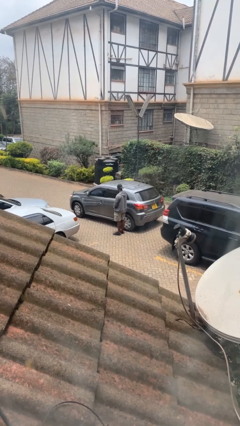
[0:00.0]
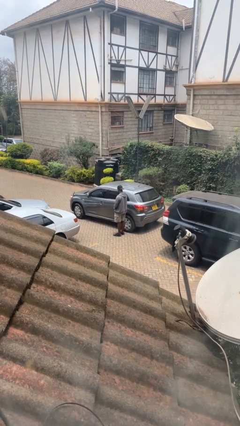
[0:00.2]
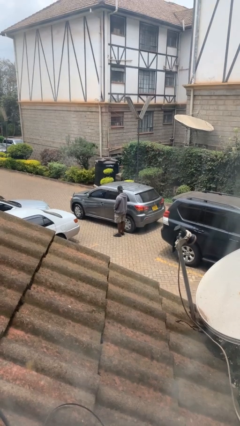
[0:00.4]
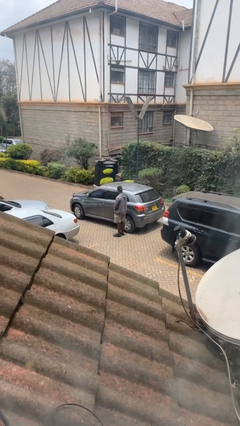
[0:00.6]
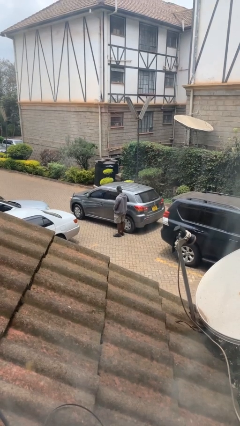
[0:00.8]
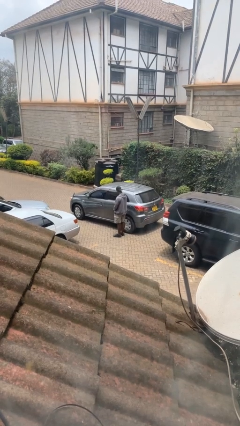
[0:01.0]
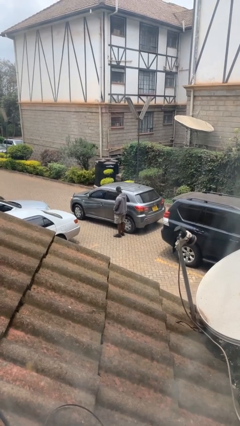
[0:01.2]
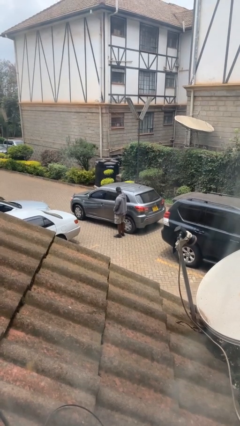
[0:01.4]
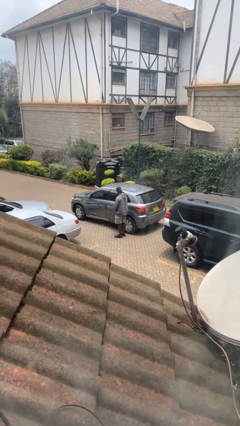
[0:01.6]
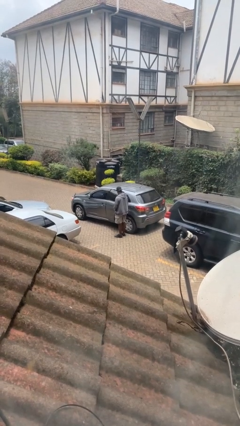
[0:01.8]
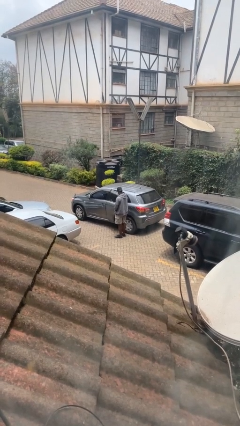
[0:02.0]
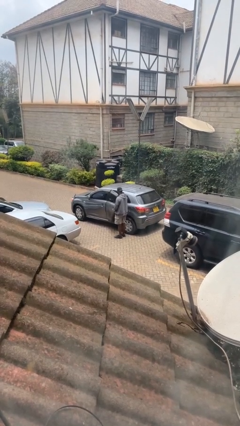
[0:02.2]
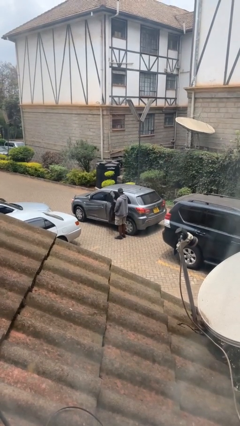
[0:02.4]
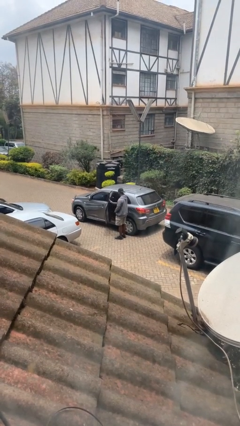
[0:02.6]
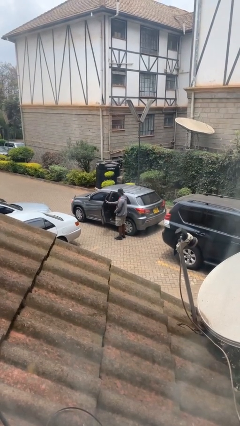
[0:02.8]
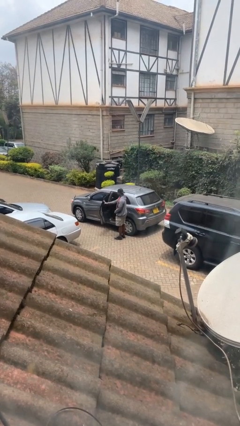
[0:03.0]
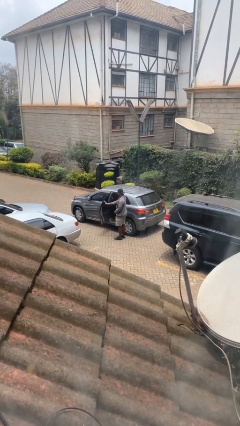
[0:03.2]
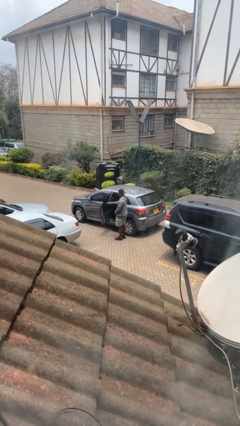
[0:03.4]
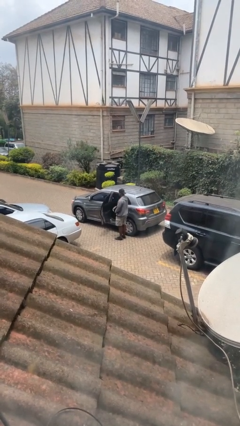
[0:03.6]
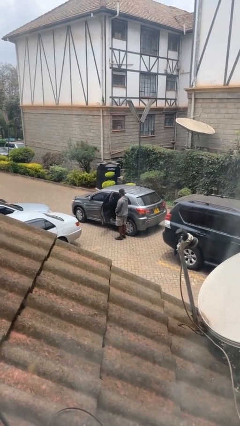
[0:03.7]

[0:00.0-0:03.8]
person opens car door

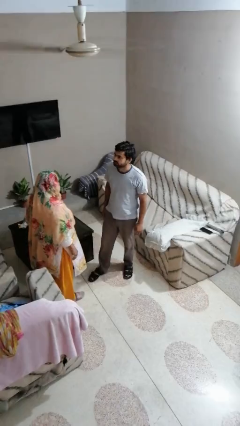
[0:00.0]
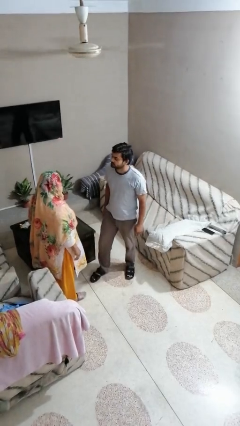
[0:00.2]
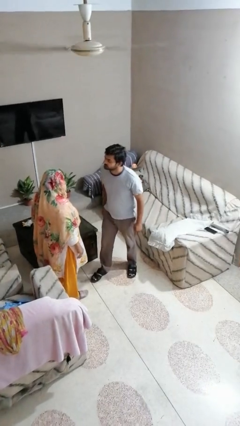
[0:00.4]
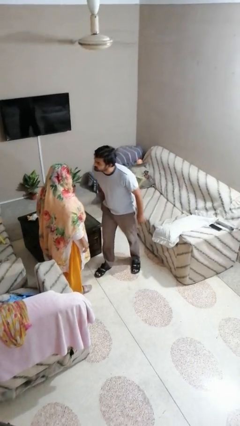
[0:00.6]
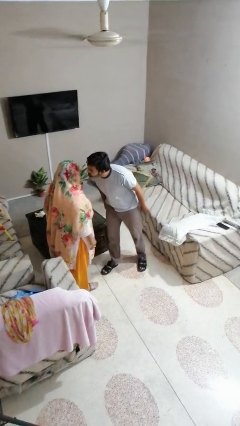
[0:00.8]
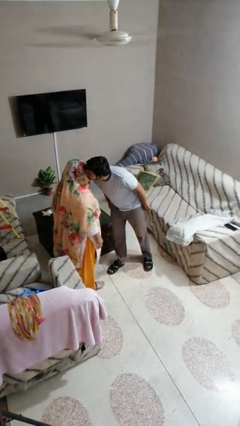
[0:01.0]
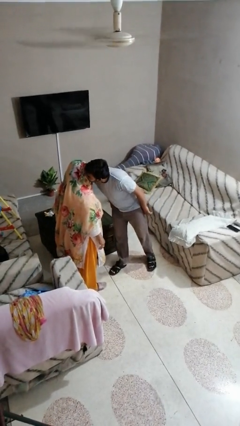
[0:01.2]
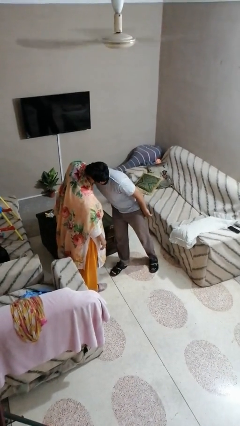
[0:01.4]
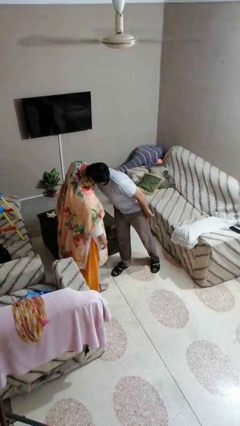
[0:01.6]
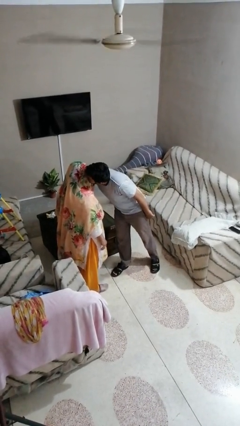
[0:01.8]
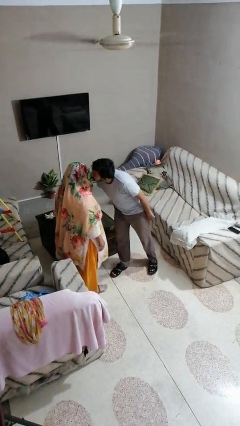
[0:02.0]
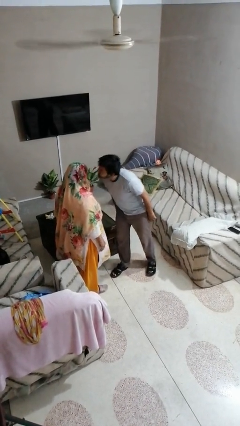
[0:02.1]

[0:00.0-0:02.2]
person kisses cheek of person

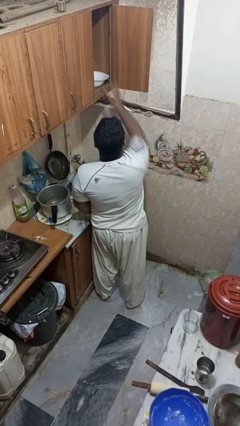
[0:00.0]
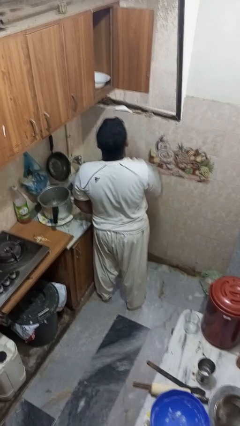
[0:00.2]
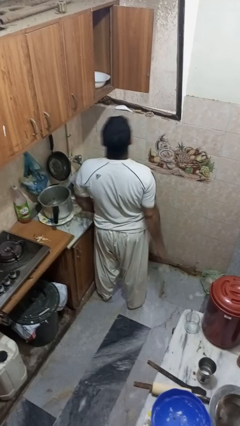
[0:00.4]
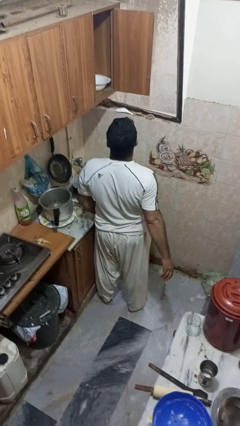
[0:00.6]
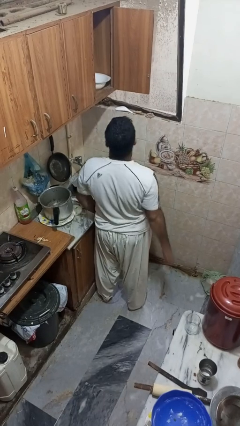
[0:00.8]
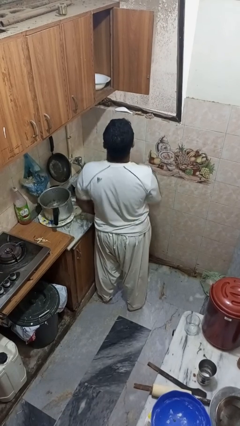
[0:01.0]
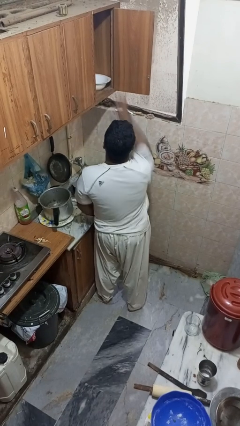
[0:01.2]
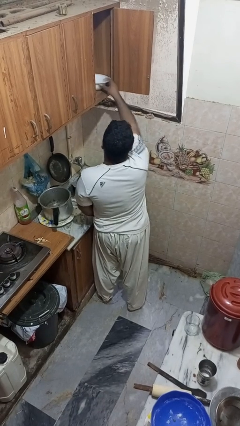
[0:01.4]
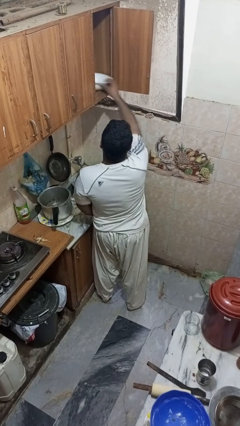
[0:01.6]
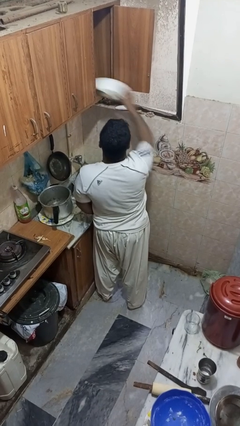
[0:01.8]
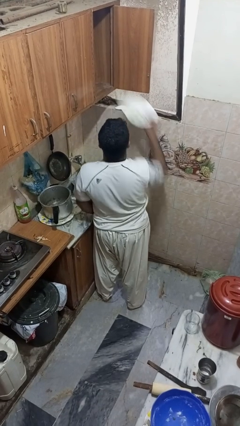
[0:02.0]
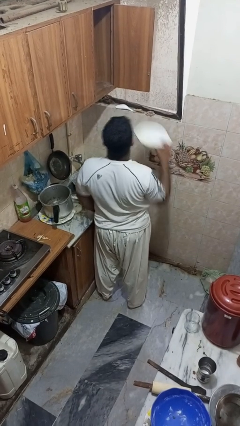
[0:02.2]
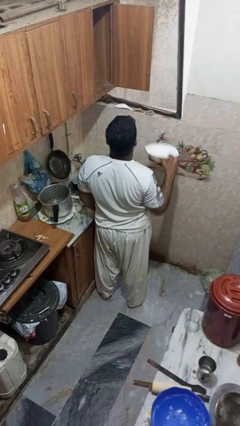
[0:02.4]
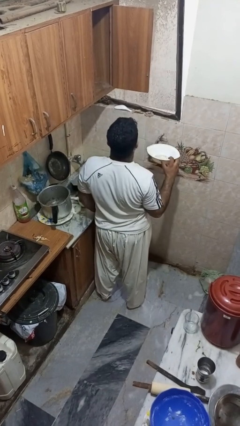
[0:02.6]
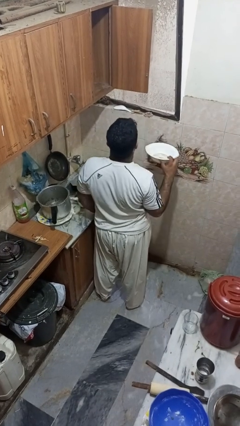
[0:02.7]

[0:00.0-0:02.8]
person takes object from cabinet

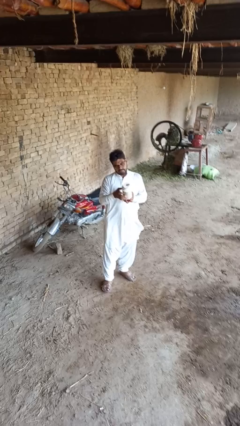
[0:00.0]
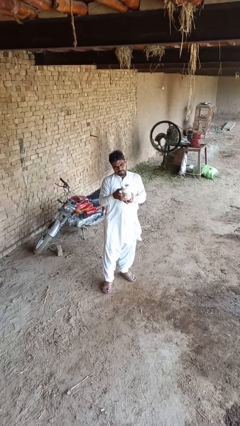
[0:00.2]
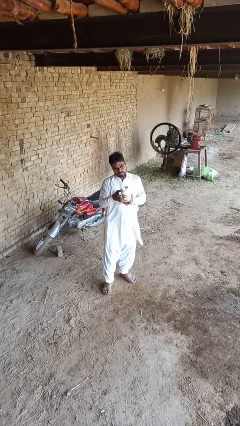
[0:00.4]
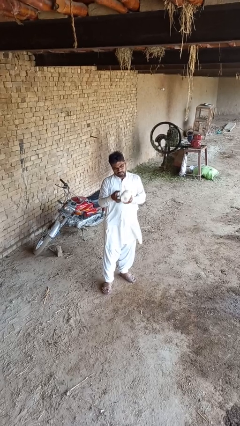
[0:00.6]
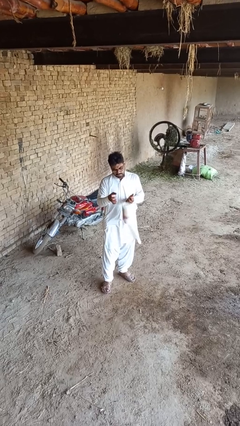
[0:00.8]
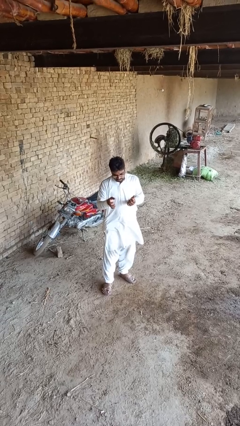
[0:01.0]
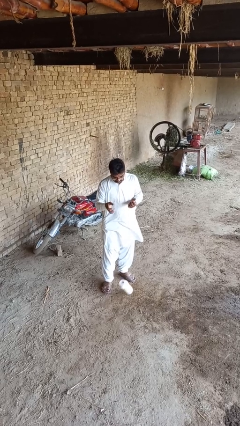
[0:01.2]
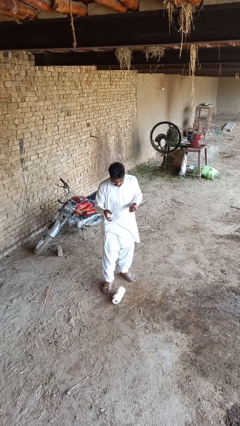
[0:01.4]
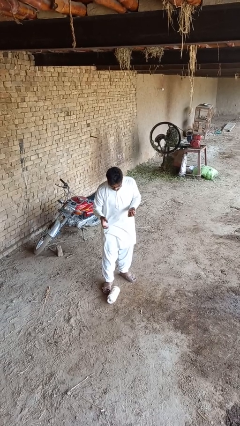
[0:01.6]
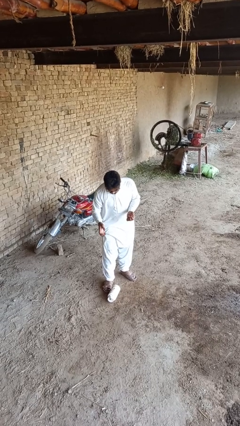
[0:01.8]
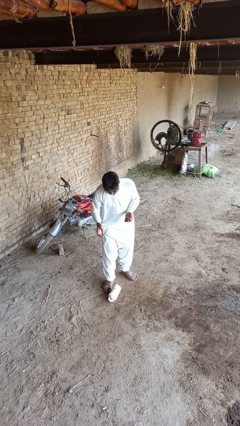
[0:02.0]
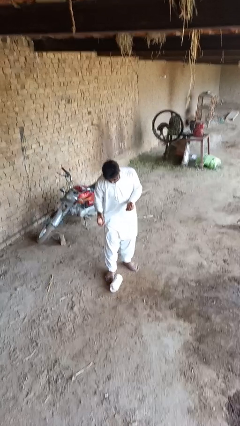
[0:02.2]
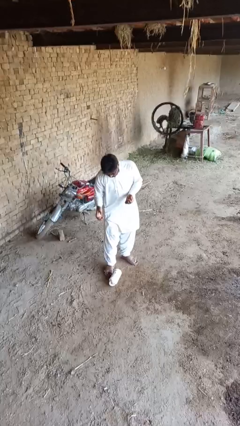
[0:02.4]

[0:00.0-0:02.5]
person drops object

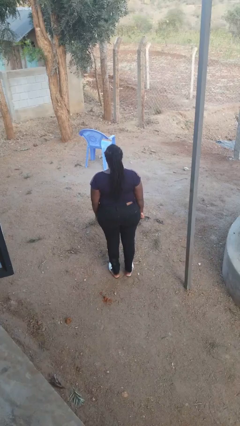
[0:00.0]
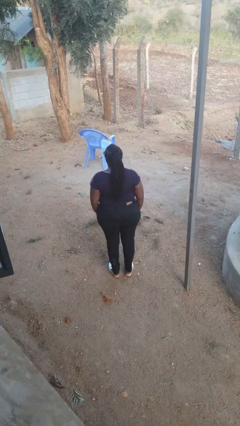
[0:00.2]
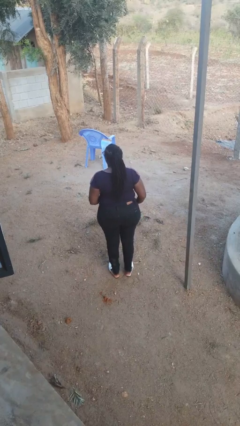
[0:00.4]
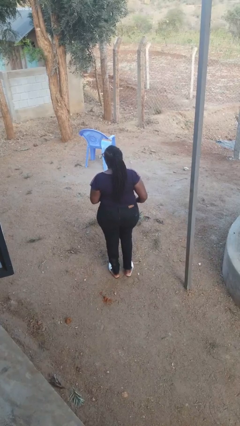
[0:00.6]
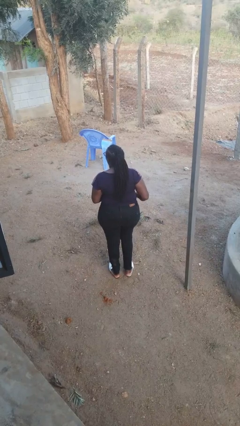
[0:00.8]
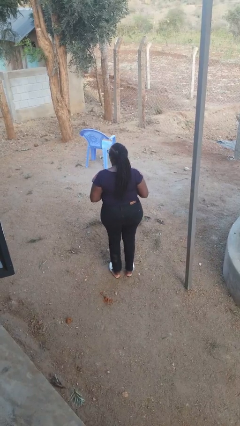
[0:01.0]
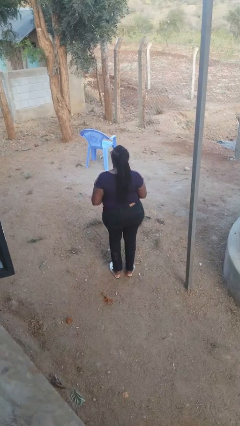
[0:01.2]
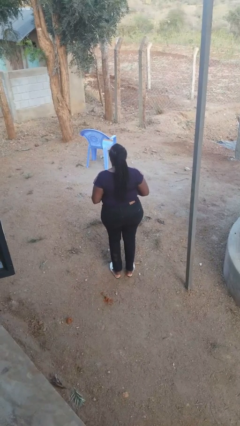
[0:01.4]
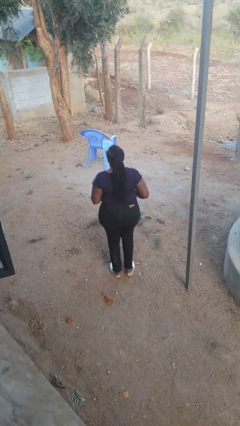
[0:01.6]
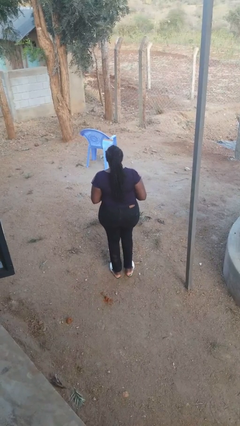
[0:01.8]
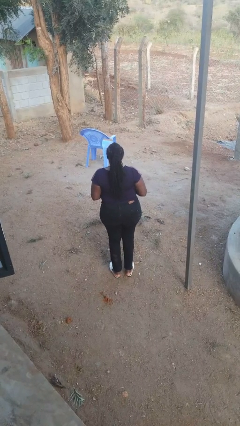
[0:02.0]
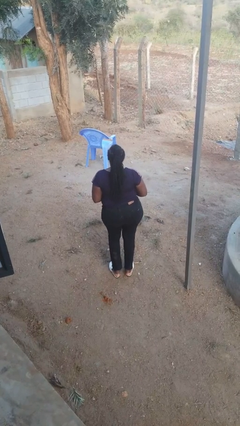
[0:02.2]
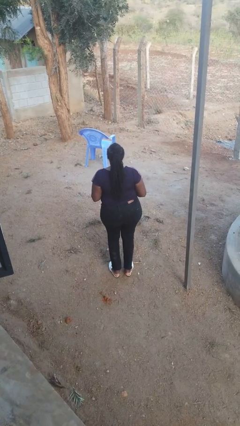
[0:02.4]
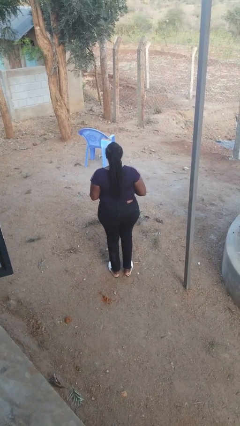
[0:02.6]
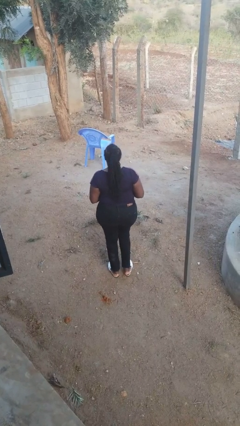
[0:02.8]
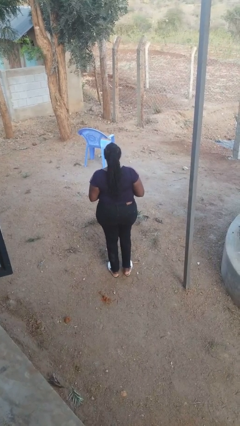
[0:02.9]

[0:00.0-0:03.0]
person wiggles hips

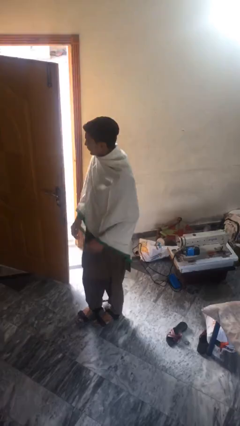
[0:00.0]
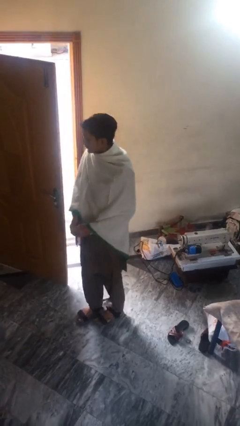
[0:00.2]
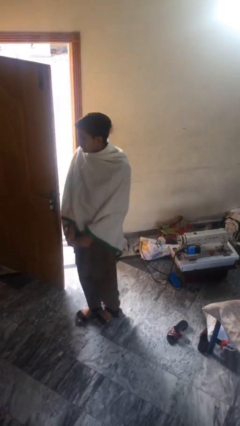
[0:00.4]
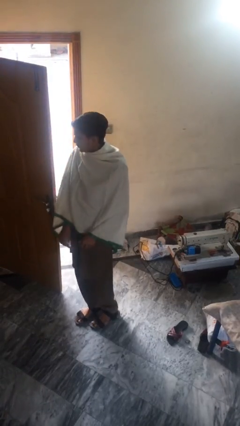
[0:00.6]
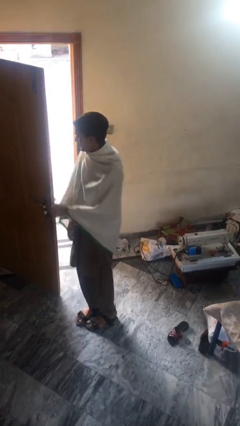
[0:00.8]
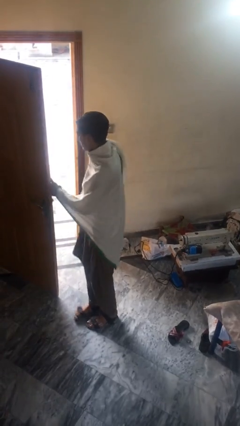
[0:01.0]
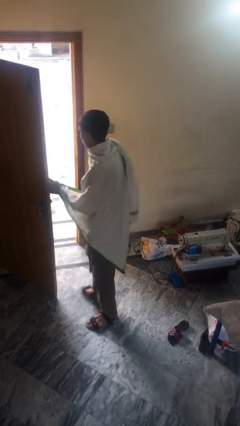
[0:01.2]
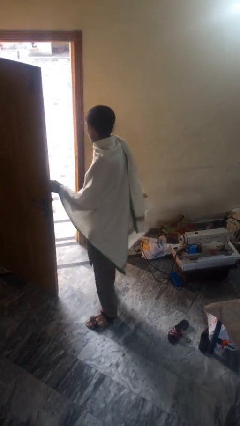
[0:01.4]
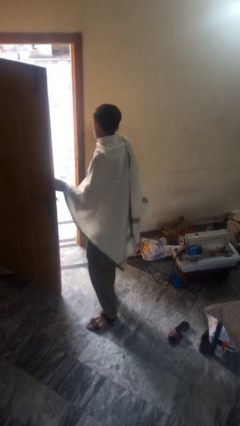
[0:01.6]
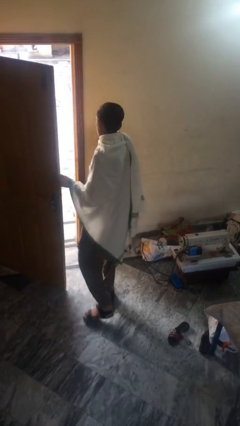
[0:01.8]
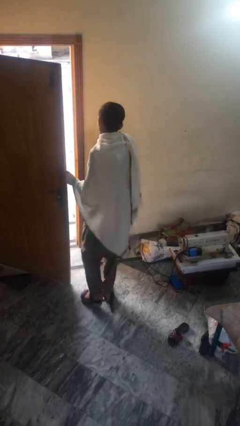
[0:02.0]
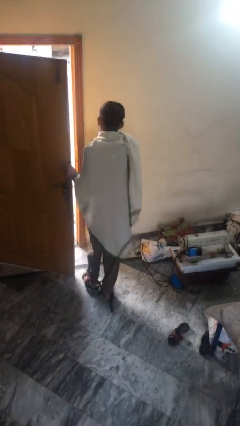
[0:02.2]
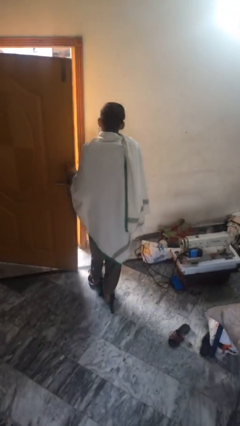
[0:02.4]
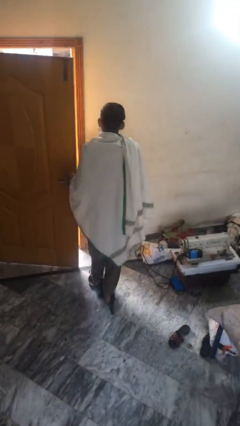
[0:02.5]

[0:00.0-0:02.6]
person closes facility door

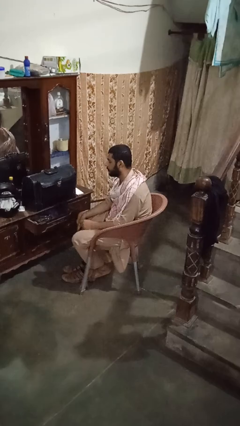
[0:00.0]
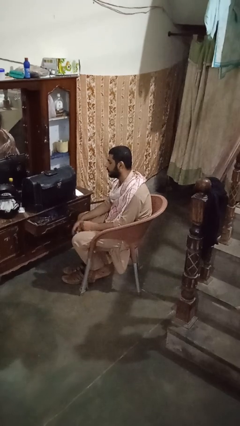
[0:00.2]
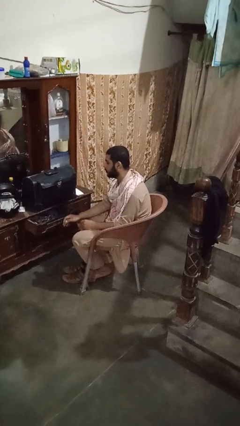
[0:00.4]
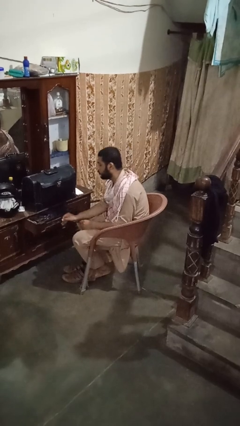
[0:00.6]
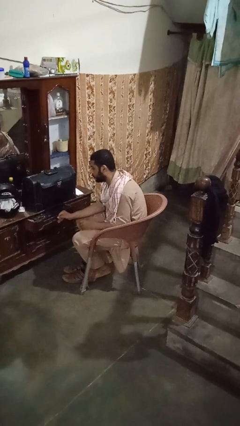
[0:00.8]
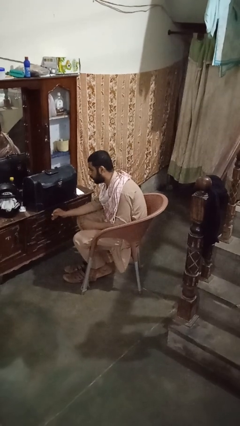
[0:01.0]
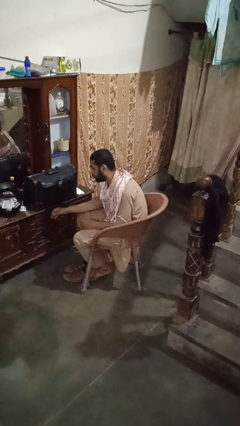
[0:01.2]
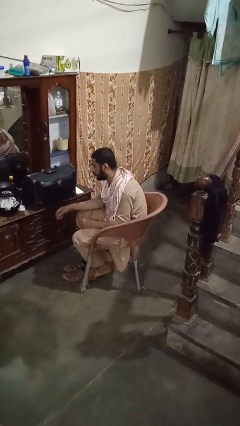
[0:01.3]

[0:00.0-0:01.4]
person closes dresser drawer
